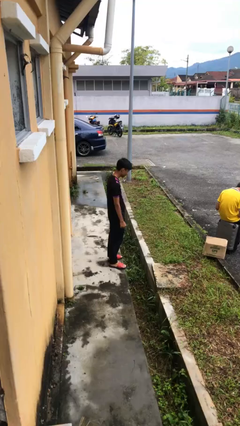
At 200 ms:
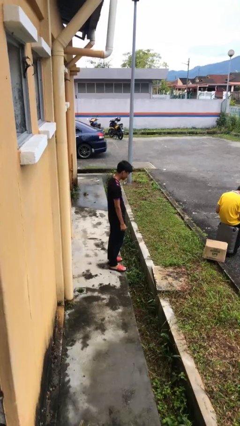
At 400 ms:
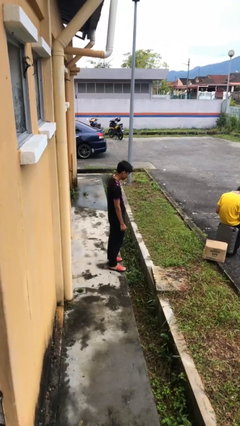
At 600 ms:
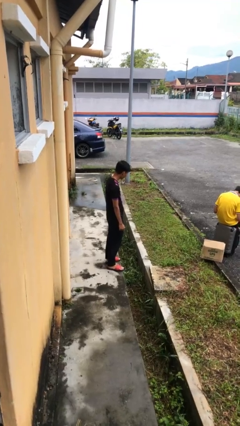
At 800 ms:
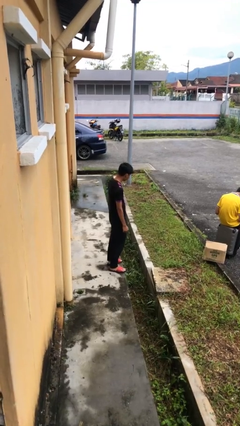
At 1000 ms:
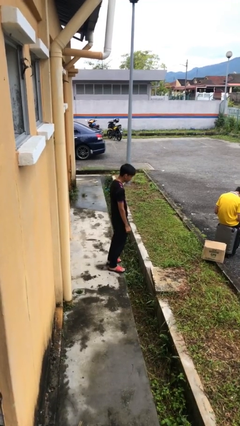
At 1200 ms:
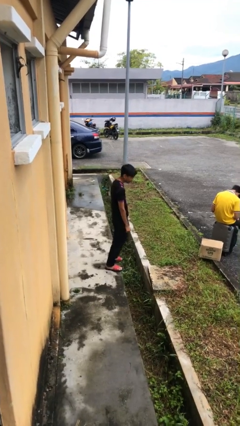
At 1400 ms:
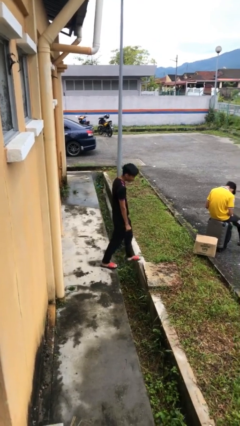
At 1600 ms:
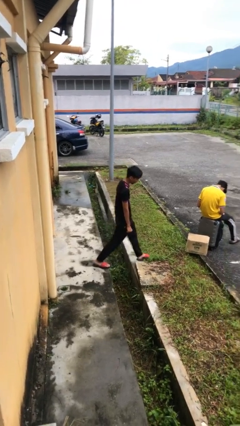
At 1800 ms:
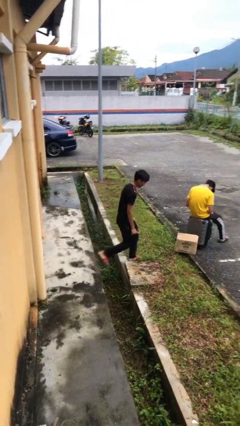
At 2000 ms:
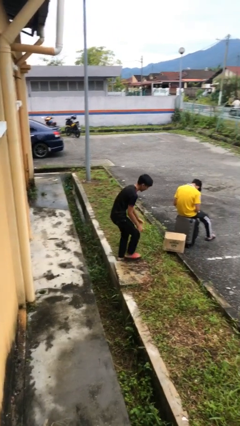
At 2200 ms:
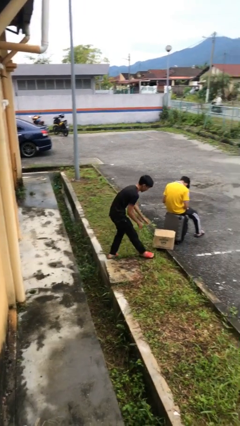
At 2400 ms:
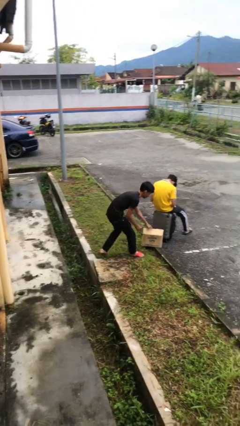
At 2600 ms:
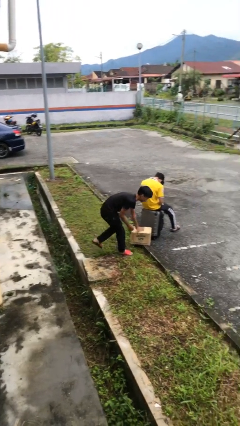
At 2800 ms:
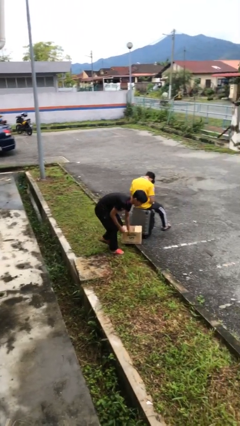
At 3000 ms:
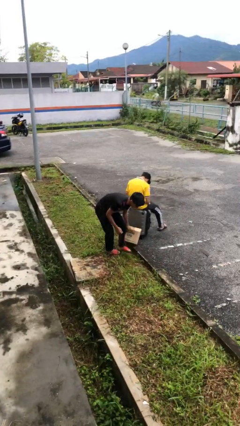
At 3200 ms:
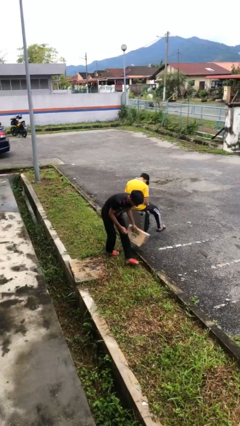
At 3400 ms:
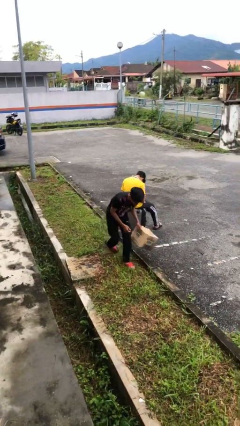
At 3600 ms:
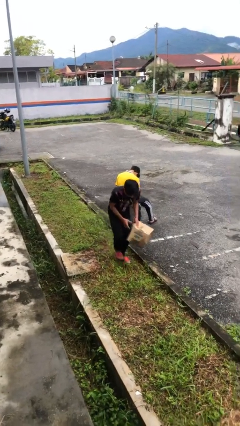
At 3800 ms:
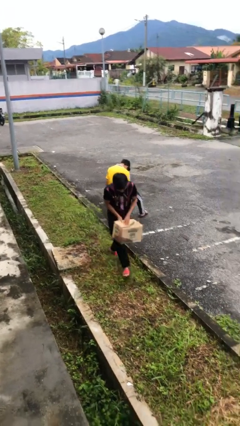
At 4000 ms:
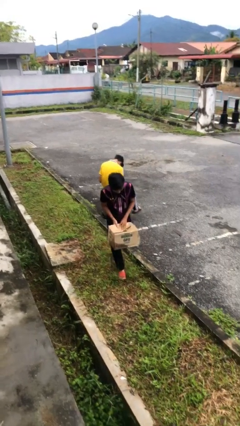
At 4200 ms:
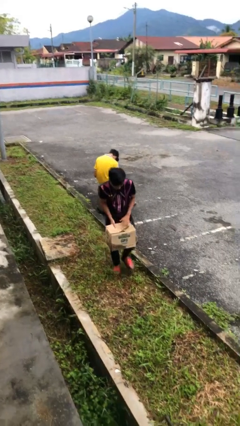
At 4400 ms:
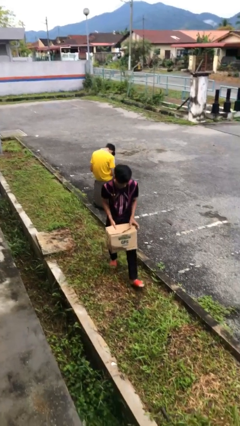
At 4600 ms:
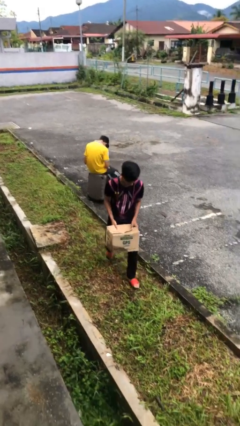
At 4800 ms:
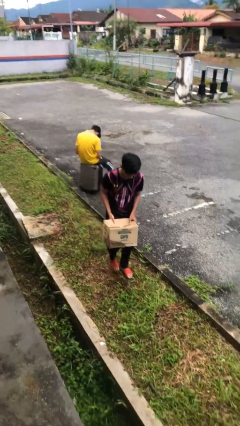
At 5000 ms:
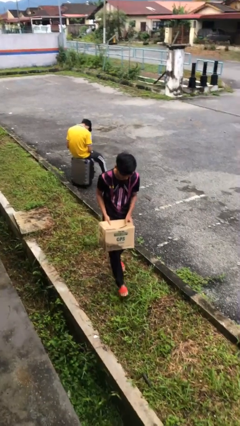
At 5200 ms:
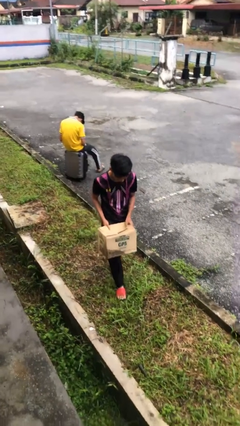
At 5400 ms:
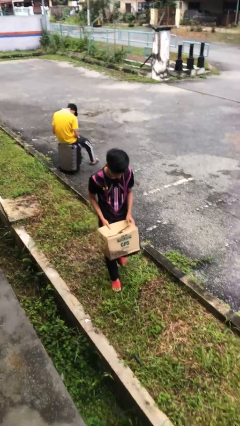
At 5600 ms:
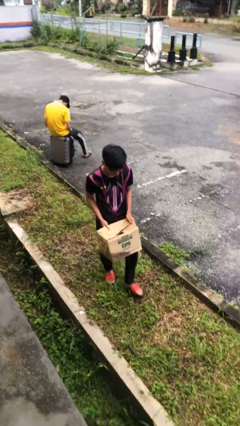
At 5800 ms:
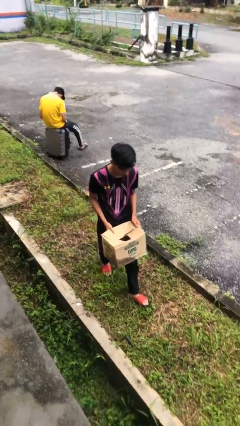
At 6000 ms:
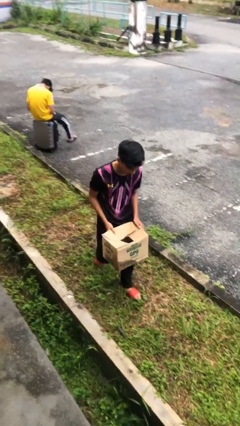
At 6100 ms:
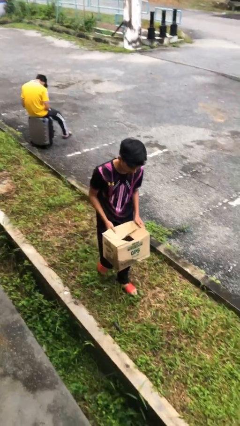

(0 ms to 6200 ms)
person steals object from person

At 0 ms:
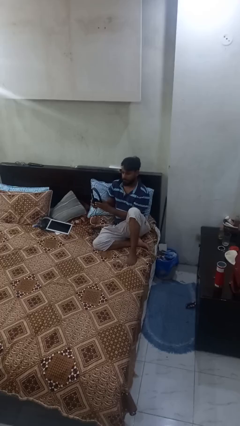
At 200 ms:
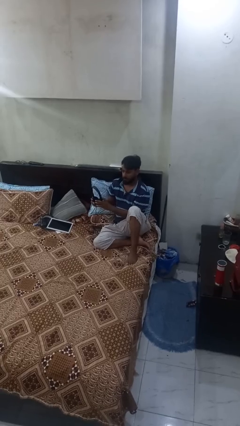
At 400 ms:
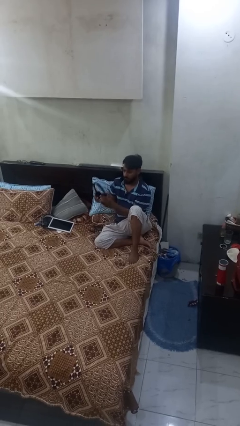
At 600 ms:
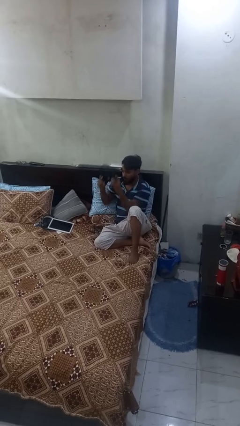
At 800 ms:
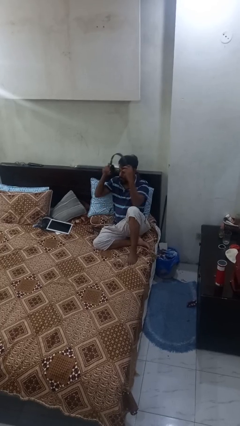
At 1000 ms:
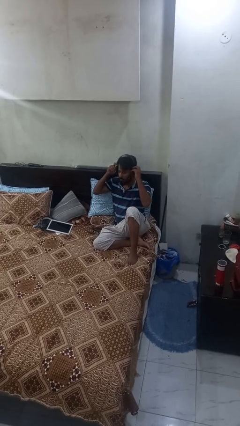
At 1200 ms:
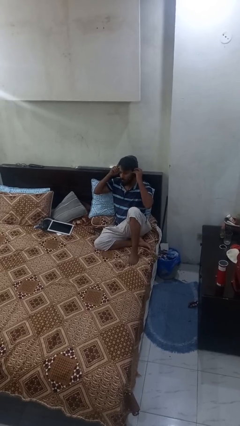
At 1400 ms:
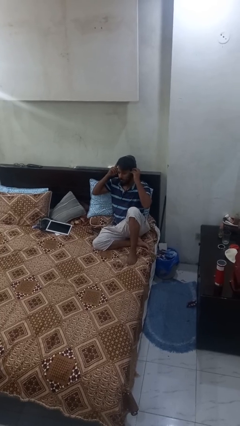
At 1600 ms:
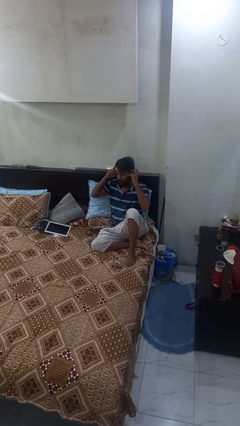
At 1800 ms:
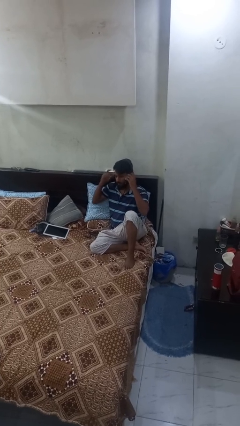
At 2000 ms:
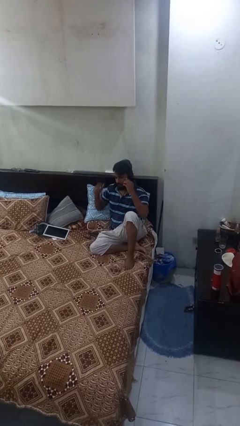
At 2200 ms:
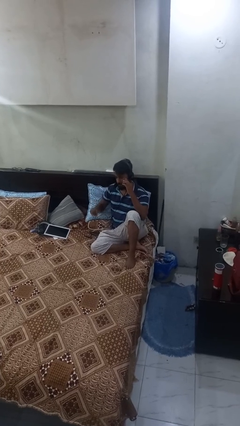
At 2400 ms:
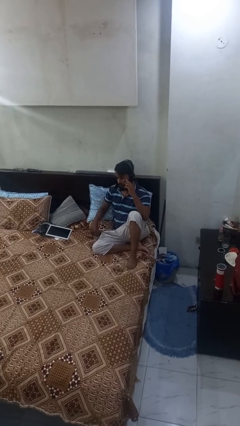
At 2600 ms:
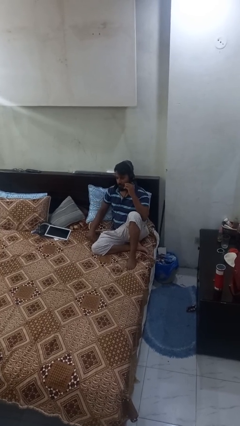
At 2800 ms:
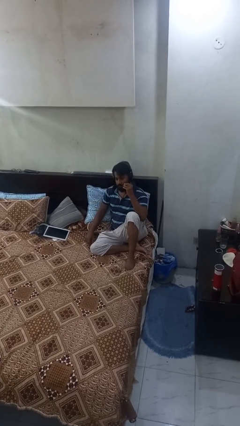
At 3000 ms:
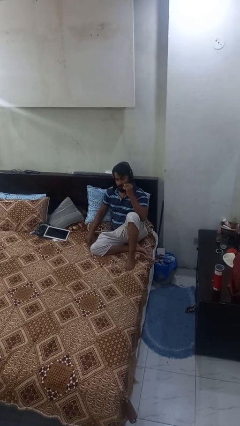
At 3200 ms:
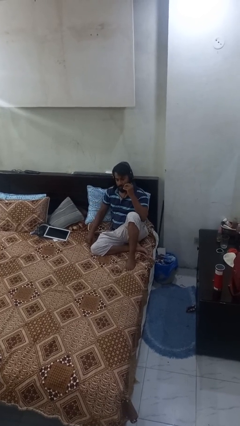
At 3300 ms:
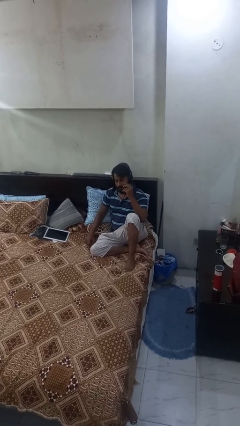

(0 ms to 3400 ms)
person puts on headphones

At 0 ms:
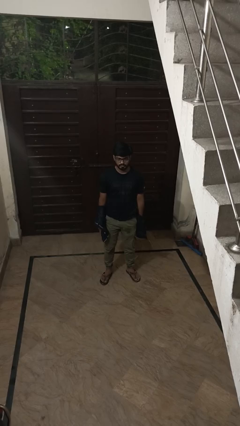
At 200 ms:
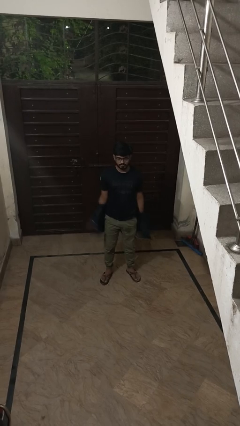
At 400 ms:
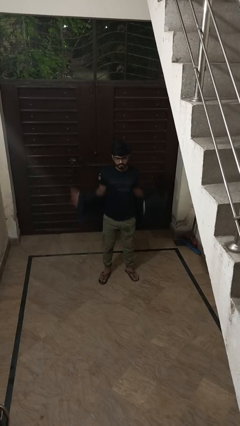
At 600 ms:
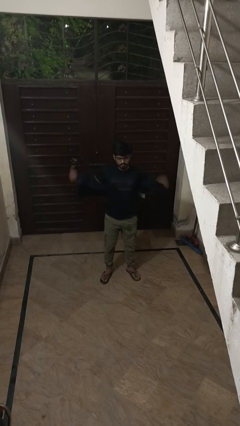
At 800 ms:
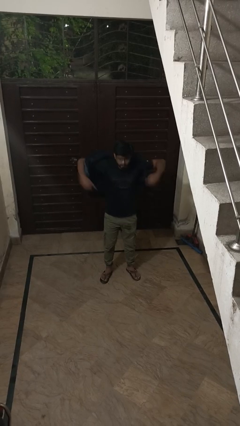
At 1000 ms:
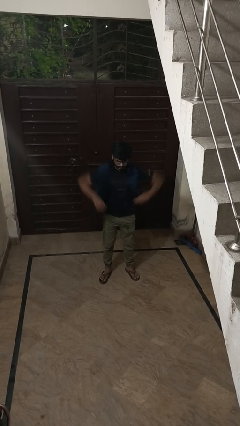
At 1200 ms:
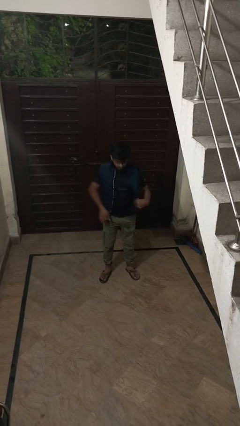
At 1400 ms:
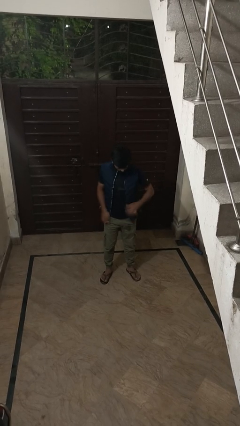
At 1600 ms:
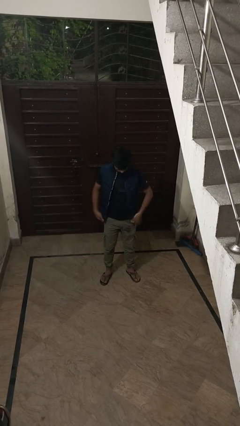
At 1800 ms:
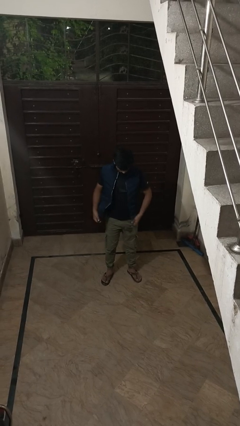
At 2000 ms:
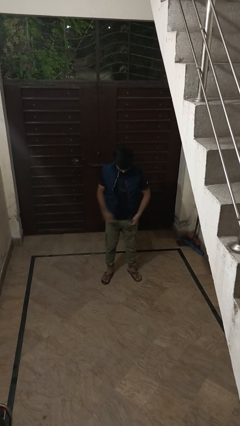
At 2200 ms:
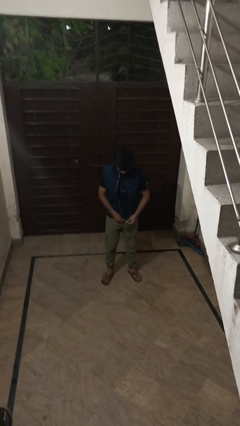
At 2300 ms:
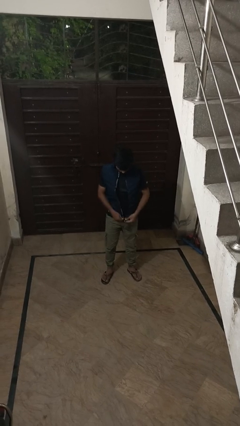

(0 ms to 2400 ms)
person puts on jacket

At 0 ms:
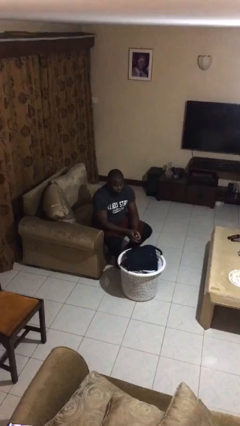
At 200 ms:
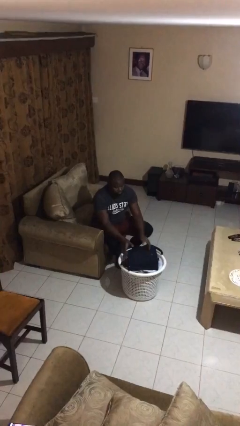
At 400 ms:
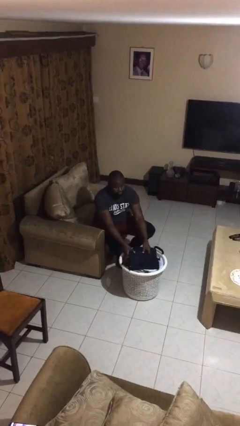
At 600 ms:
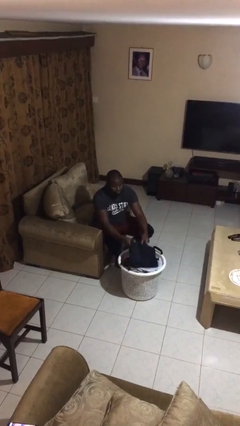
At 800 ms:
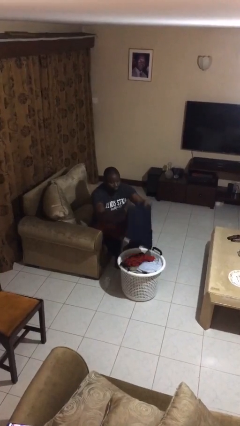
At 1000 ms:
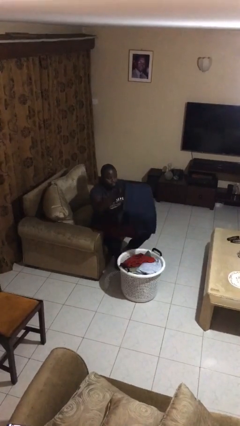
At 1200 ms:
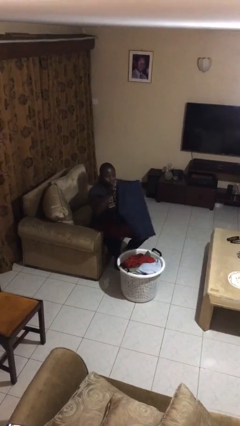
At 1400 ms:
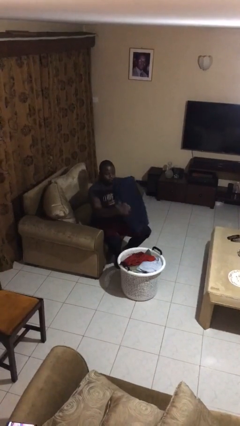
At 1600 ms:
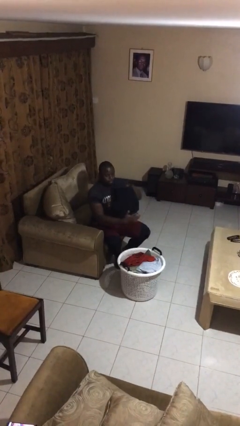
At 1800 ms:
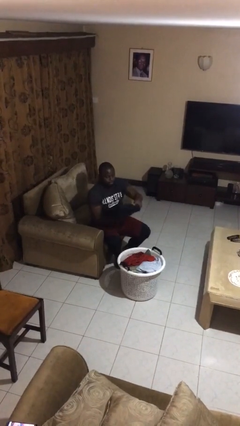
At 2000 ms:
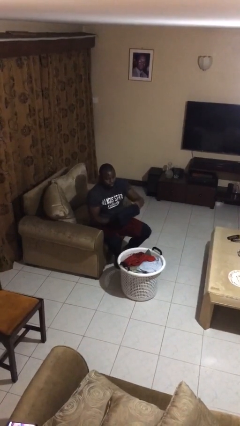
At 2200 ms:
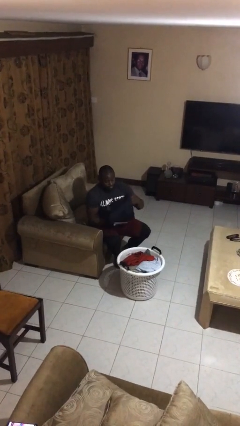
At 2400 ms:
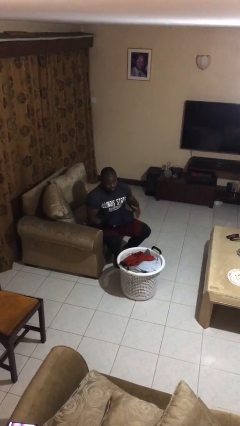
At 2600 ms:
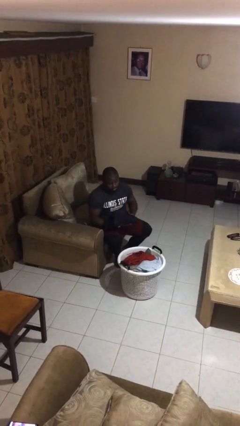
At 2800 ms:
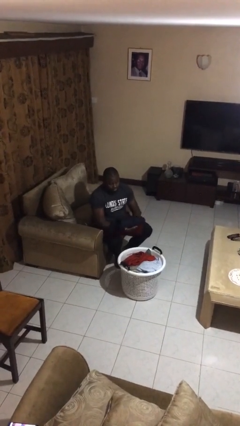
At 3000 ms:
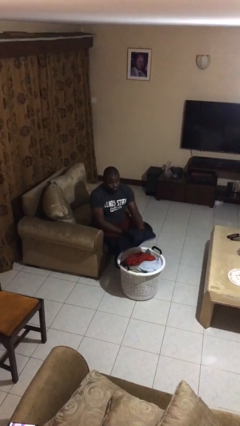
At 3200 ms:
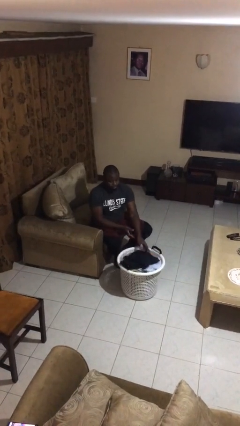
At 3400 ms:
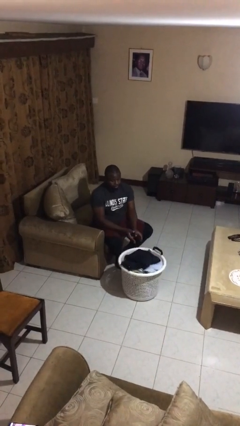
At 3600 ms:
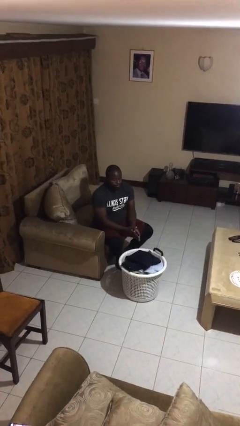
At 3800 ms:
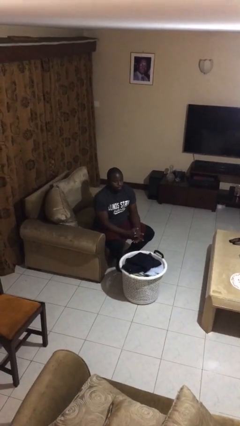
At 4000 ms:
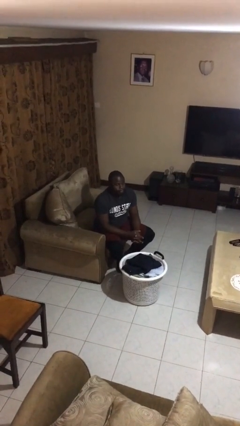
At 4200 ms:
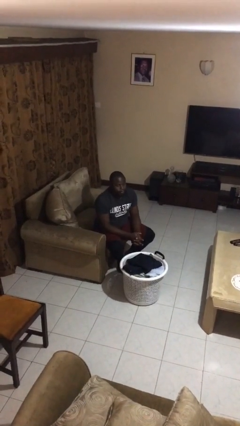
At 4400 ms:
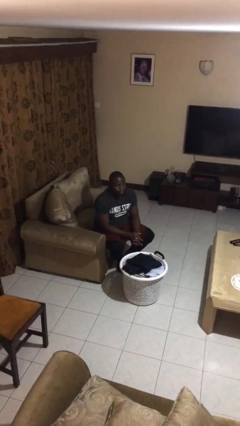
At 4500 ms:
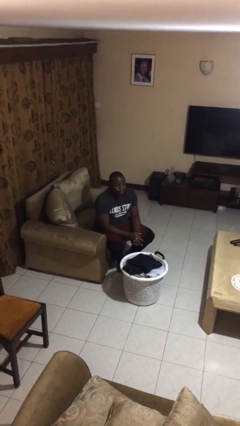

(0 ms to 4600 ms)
person folds pants

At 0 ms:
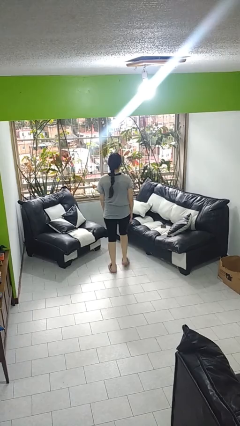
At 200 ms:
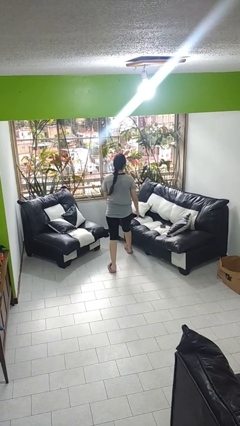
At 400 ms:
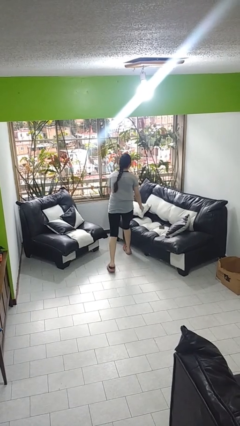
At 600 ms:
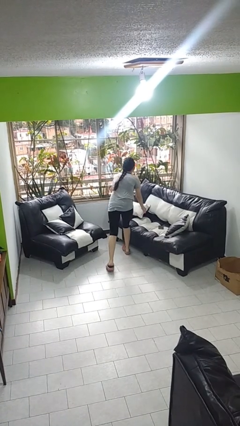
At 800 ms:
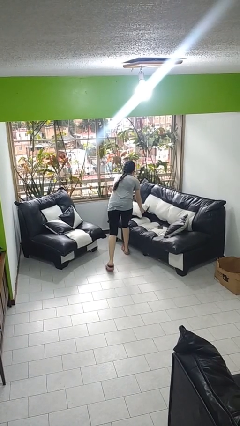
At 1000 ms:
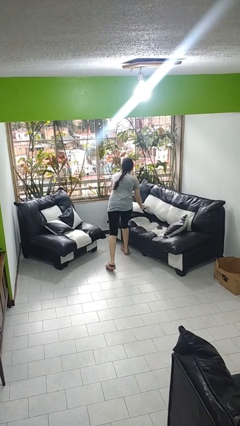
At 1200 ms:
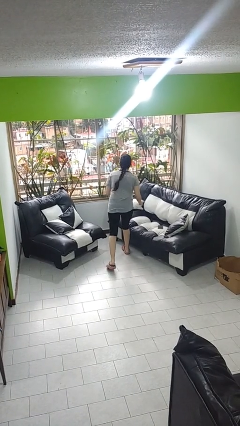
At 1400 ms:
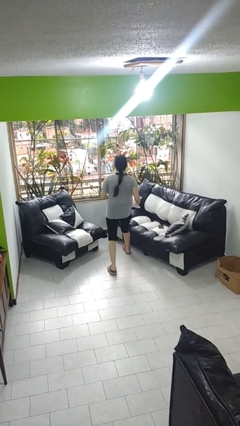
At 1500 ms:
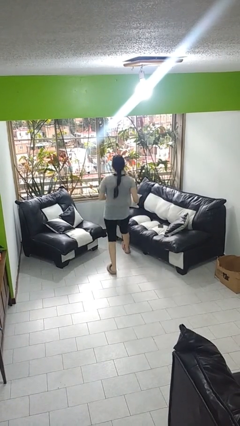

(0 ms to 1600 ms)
person picks up object from couch
